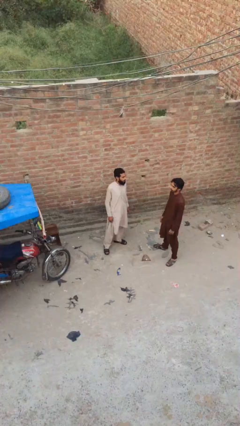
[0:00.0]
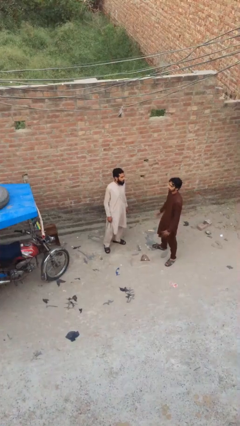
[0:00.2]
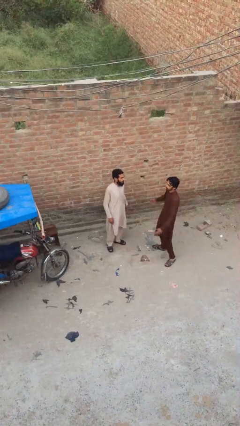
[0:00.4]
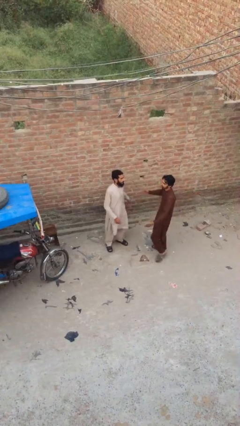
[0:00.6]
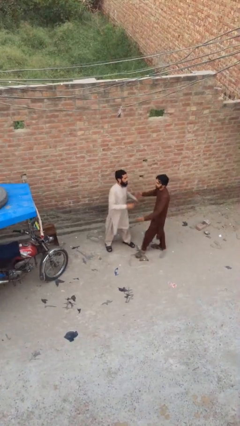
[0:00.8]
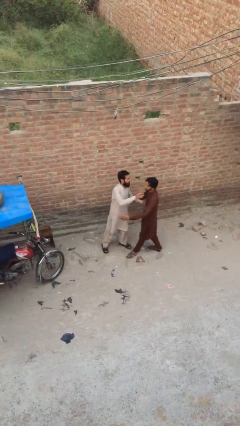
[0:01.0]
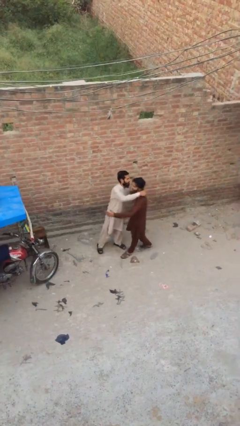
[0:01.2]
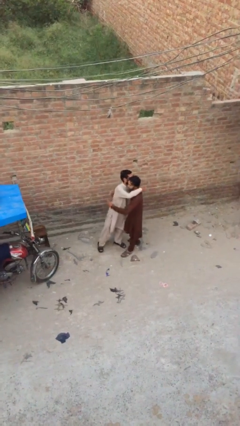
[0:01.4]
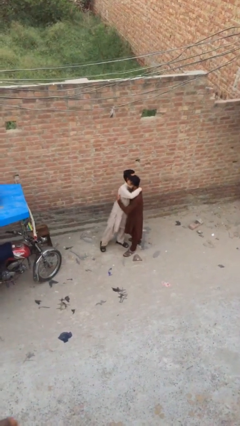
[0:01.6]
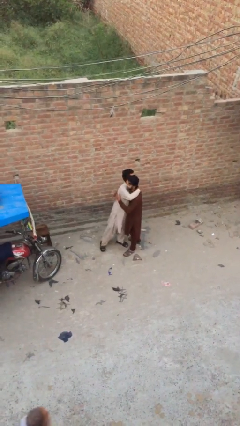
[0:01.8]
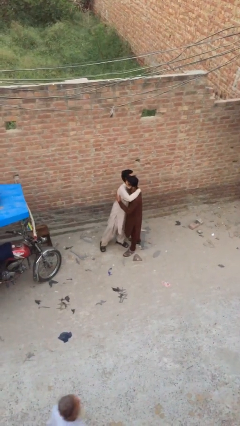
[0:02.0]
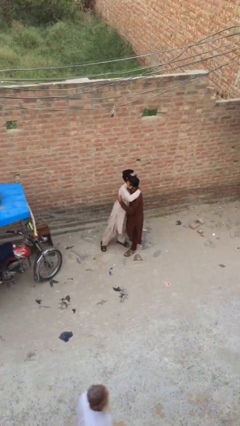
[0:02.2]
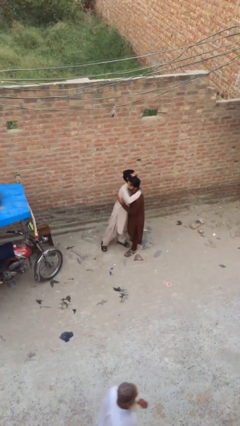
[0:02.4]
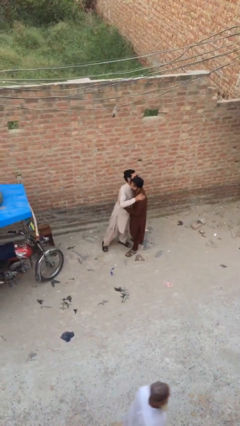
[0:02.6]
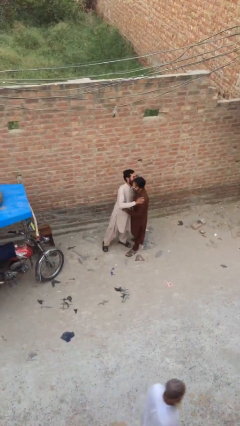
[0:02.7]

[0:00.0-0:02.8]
person embraces person

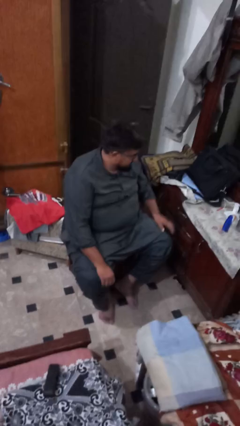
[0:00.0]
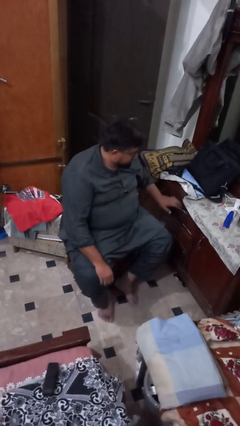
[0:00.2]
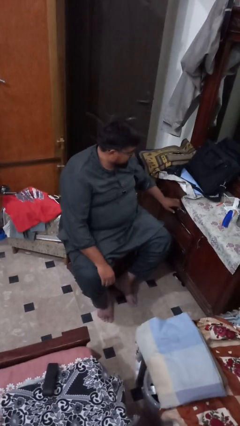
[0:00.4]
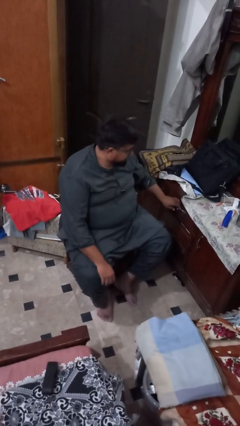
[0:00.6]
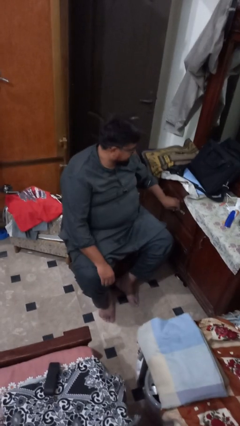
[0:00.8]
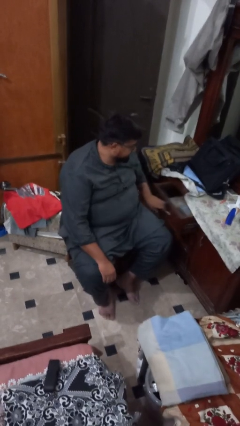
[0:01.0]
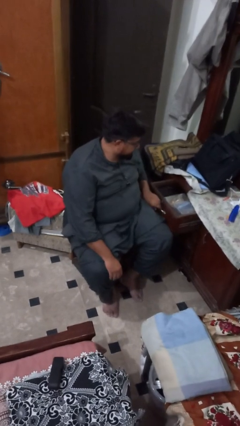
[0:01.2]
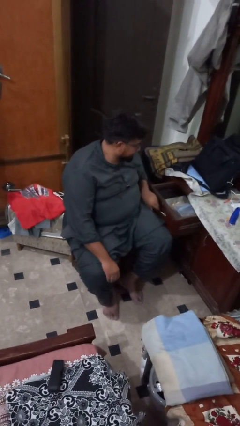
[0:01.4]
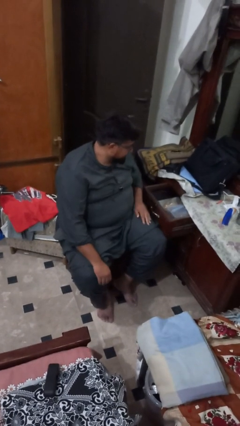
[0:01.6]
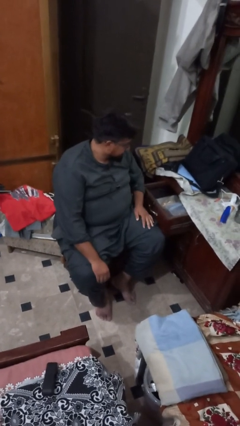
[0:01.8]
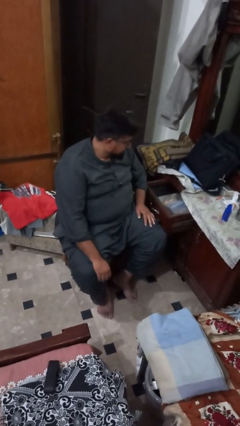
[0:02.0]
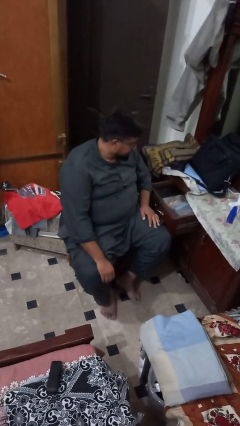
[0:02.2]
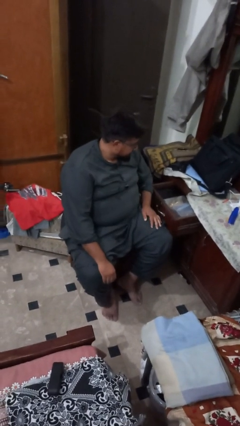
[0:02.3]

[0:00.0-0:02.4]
person opens dresser drawer

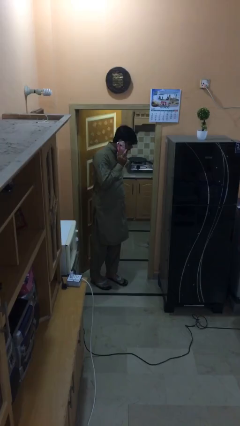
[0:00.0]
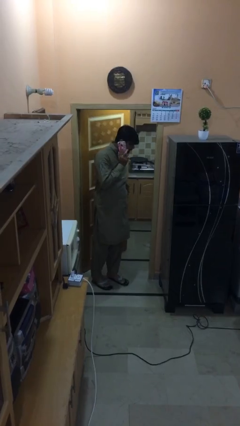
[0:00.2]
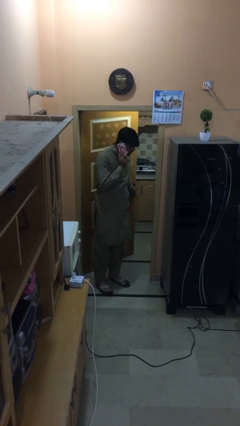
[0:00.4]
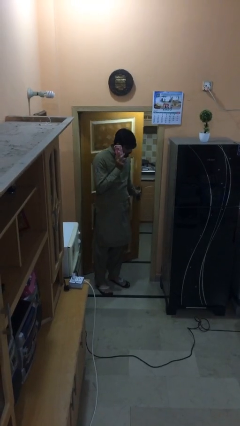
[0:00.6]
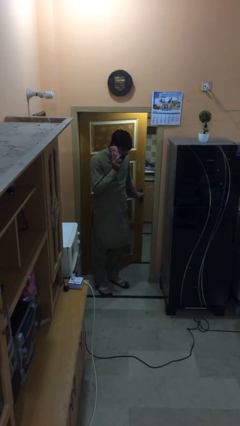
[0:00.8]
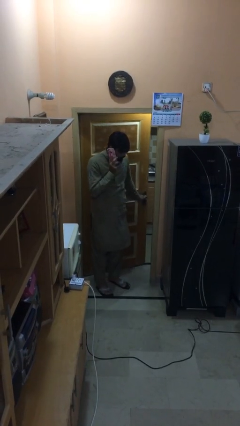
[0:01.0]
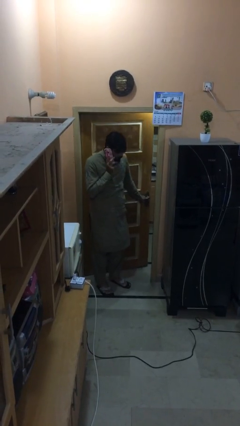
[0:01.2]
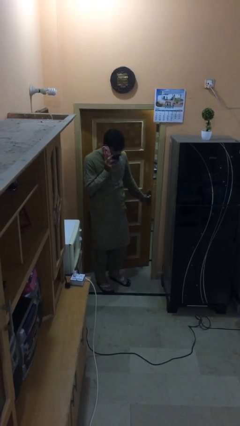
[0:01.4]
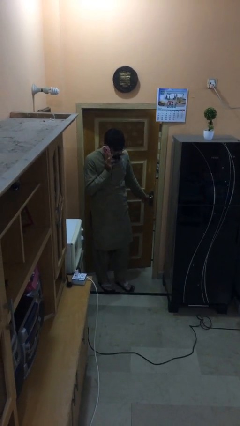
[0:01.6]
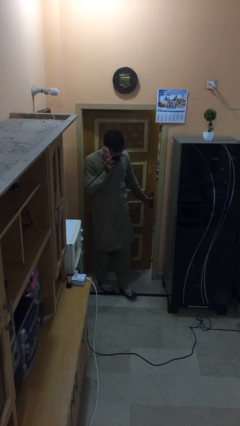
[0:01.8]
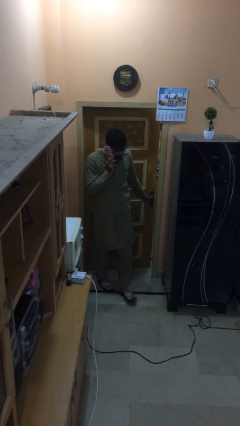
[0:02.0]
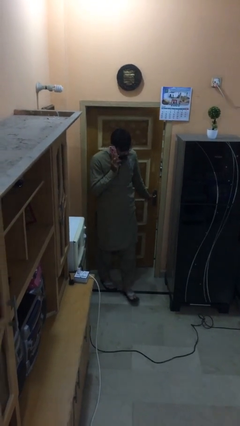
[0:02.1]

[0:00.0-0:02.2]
person closes facility door

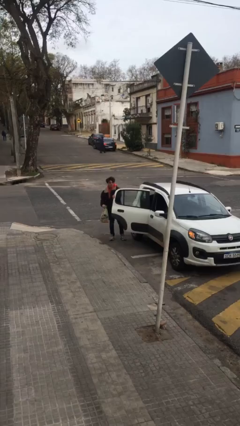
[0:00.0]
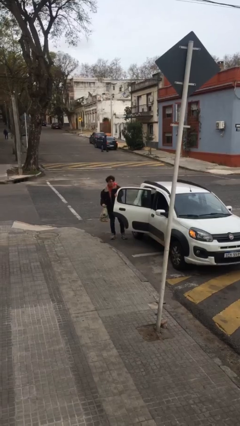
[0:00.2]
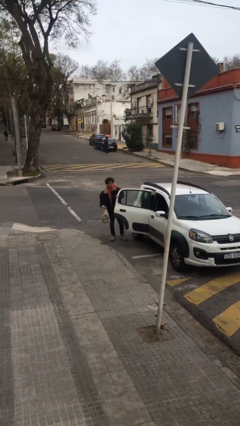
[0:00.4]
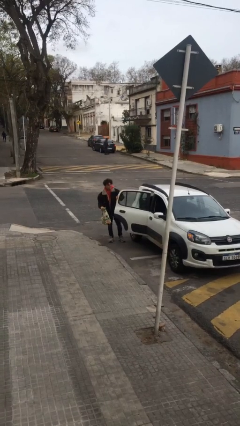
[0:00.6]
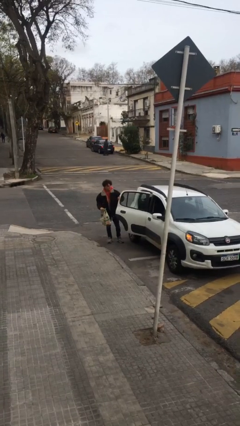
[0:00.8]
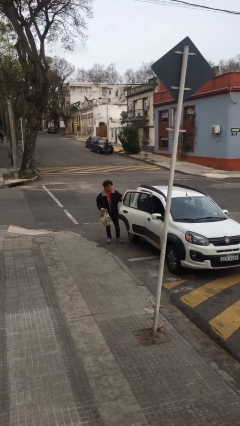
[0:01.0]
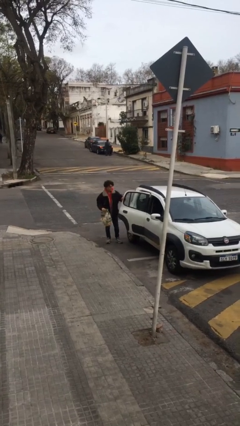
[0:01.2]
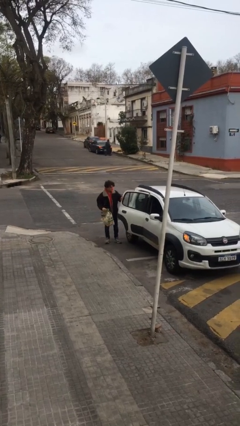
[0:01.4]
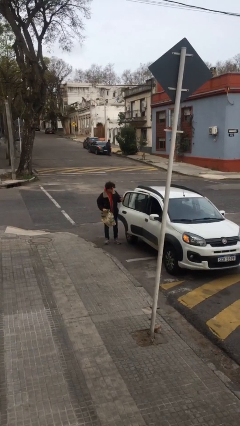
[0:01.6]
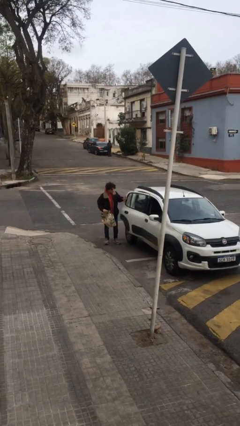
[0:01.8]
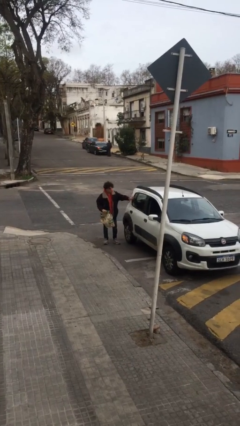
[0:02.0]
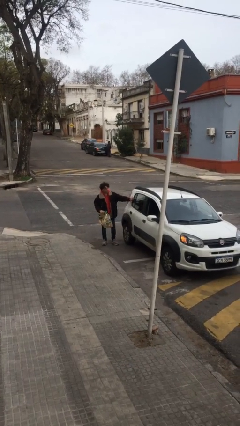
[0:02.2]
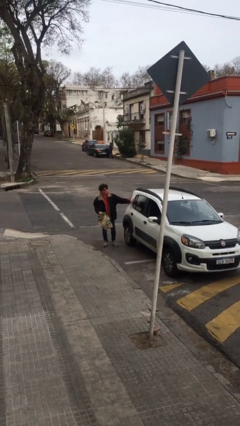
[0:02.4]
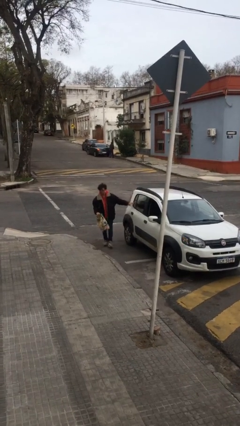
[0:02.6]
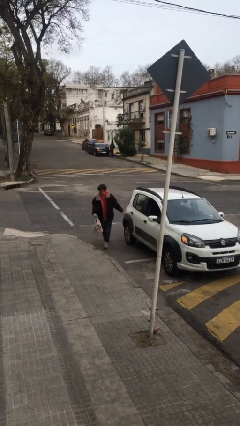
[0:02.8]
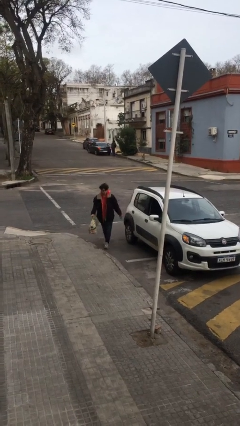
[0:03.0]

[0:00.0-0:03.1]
person closes car door

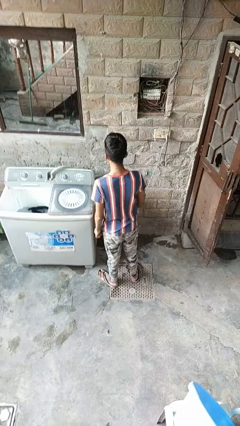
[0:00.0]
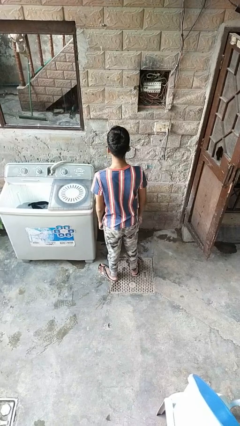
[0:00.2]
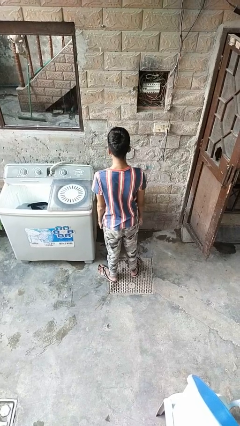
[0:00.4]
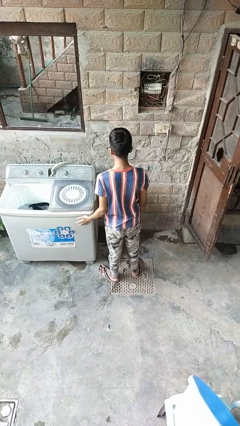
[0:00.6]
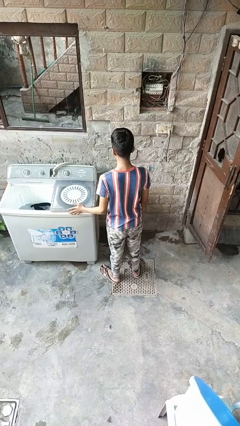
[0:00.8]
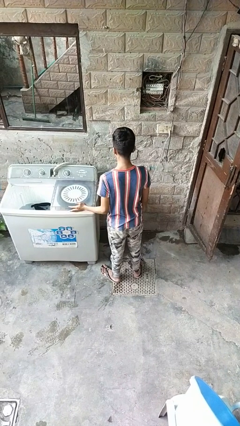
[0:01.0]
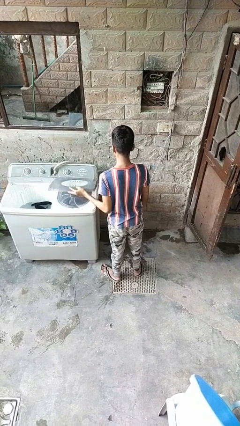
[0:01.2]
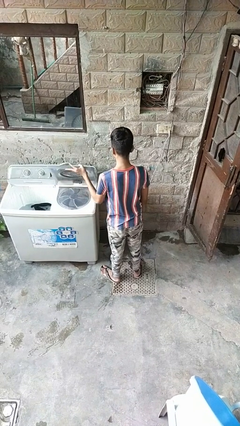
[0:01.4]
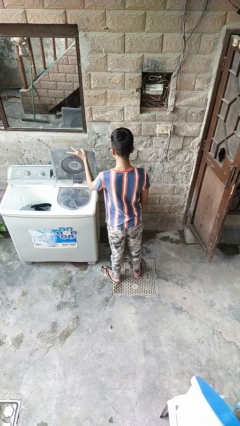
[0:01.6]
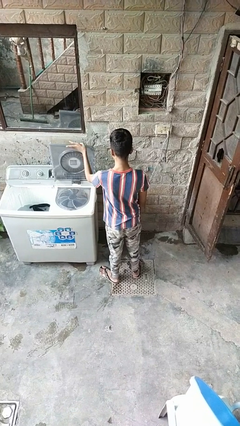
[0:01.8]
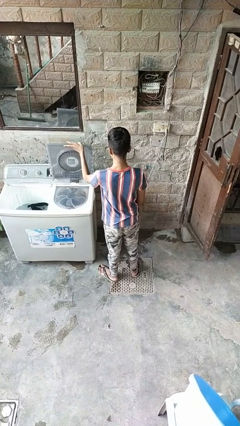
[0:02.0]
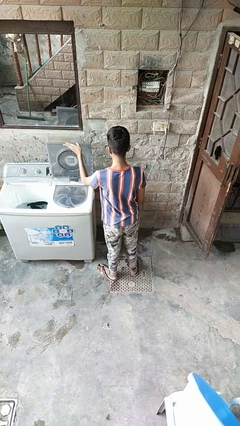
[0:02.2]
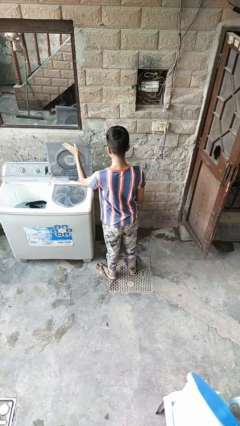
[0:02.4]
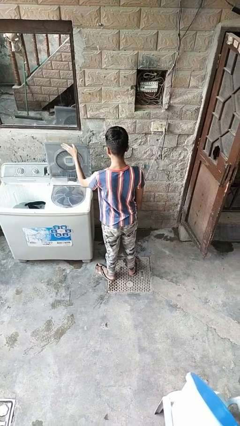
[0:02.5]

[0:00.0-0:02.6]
person turns on faucet

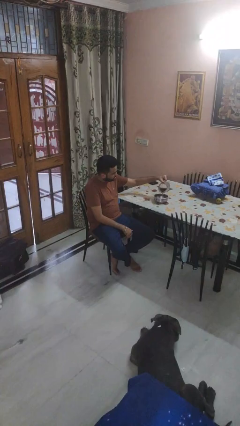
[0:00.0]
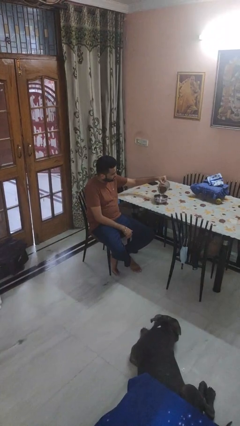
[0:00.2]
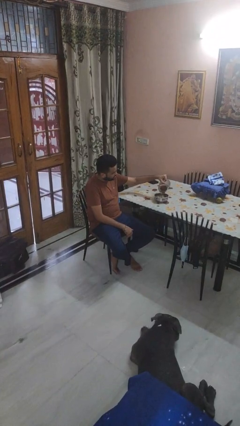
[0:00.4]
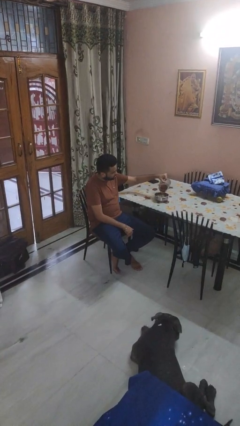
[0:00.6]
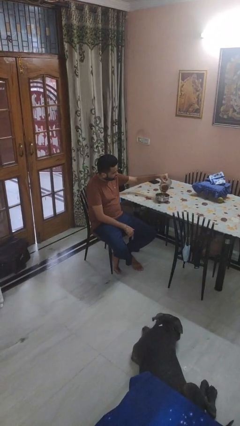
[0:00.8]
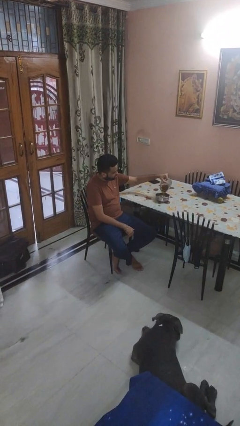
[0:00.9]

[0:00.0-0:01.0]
person pours into bowl

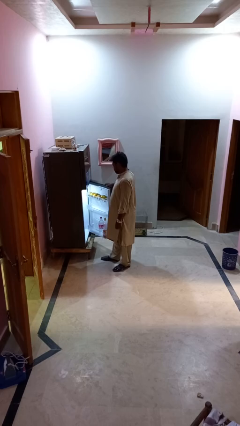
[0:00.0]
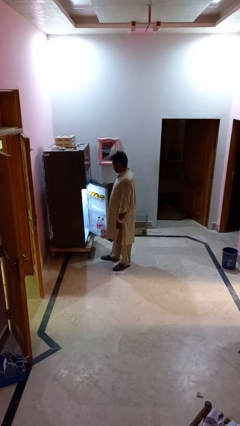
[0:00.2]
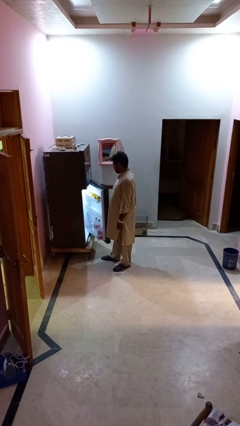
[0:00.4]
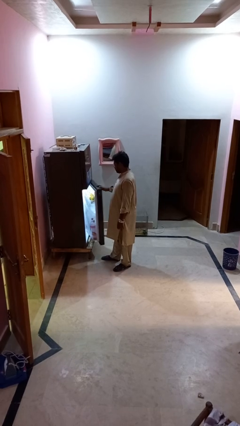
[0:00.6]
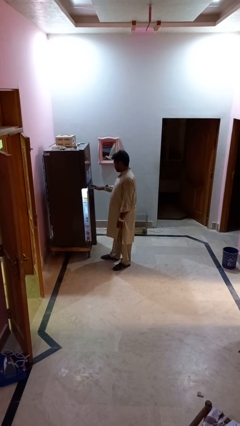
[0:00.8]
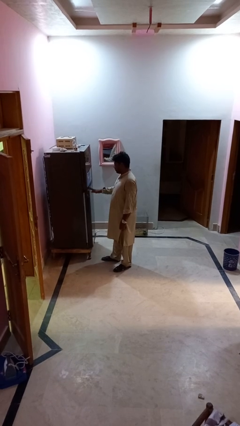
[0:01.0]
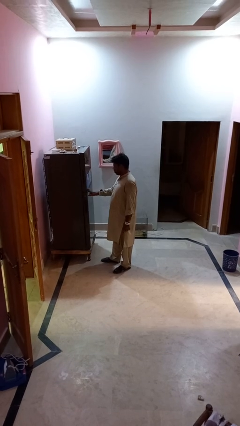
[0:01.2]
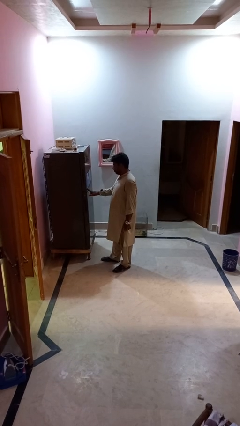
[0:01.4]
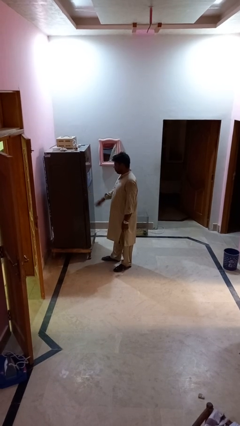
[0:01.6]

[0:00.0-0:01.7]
person closes refrigerator

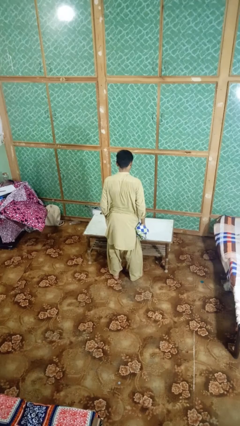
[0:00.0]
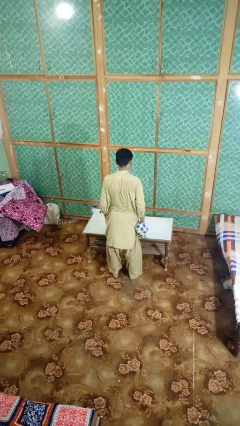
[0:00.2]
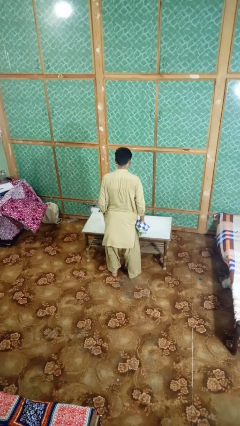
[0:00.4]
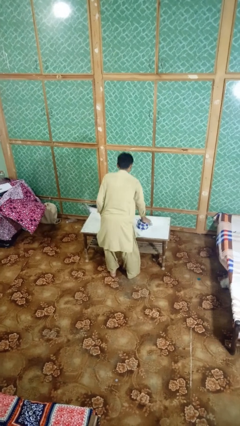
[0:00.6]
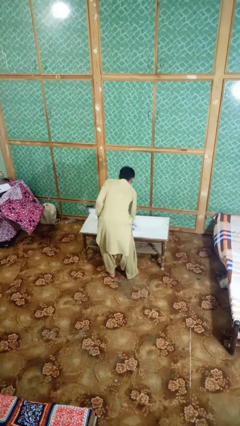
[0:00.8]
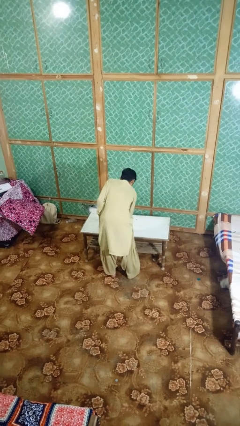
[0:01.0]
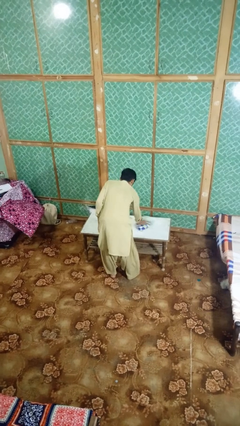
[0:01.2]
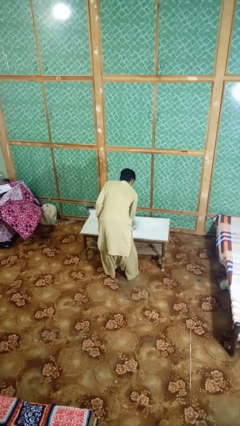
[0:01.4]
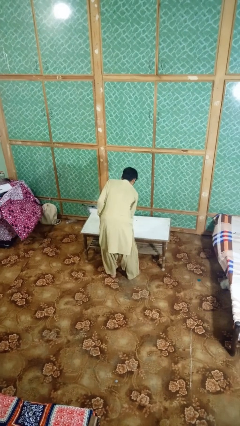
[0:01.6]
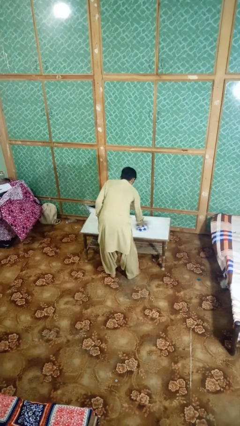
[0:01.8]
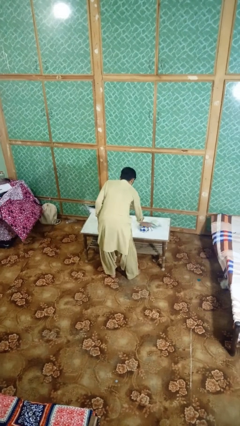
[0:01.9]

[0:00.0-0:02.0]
person cleans table with rag
